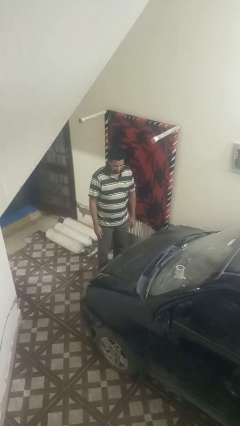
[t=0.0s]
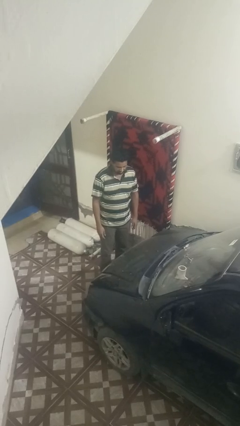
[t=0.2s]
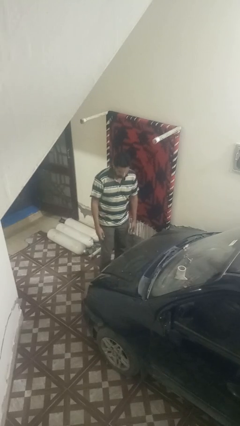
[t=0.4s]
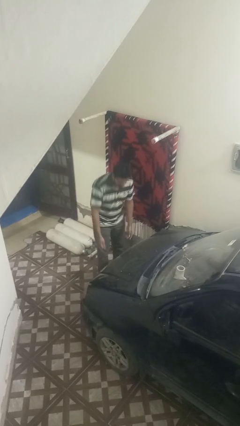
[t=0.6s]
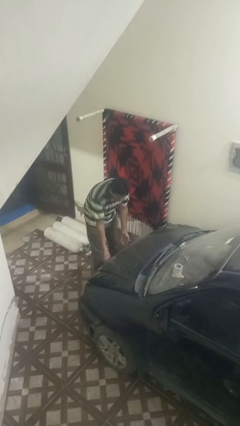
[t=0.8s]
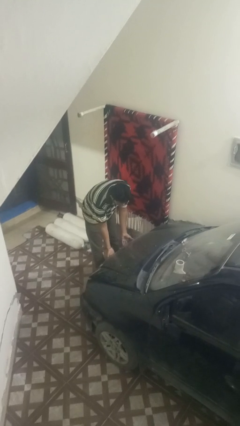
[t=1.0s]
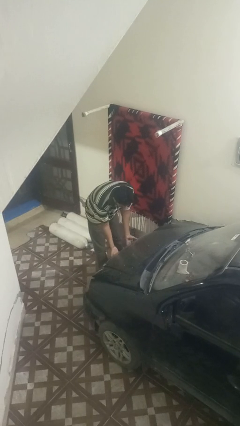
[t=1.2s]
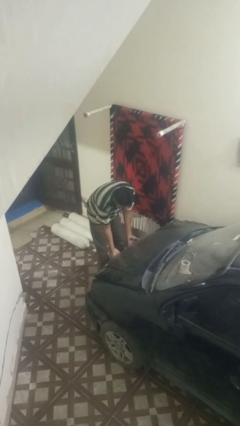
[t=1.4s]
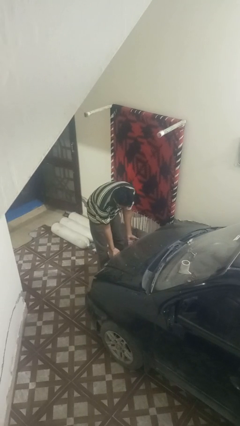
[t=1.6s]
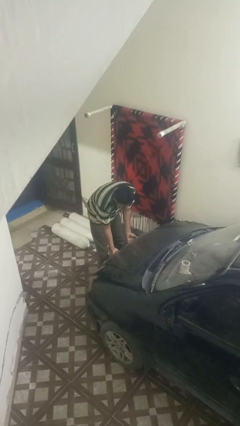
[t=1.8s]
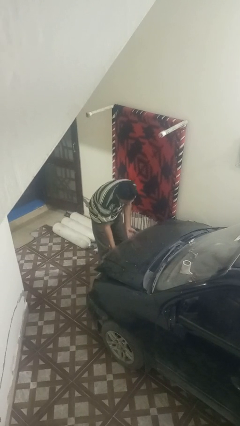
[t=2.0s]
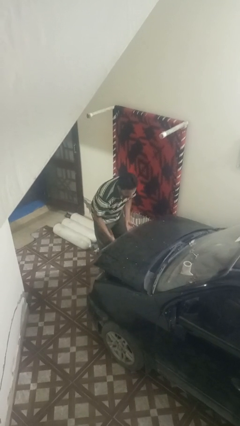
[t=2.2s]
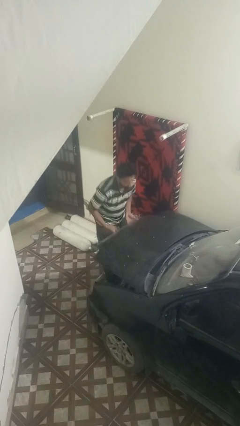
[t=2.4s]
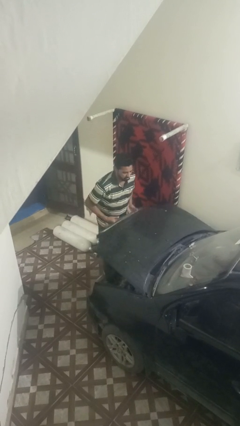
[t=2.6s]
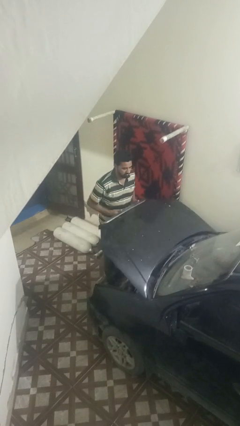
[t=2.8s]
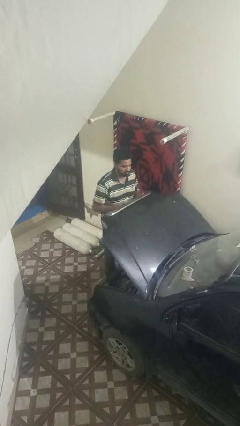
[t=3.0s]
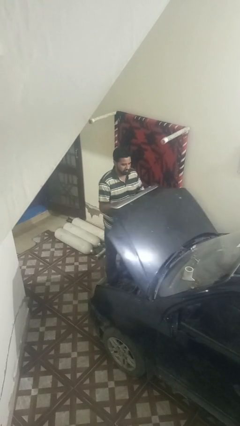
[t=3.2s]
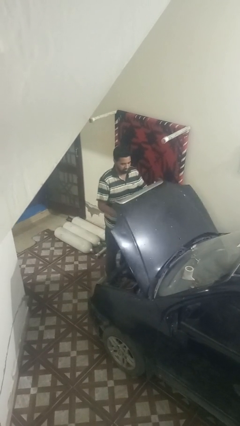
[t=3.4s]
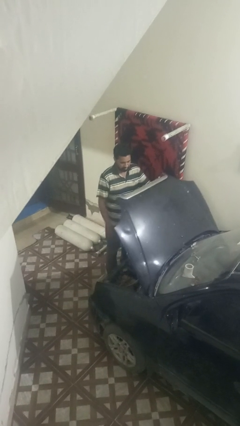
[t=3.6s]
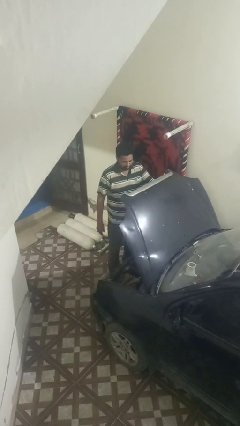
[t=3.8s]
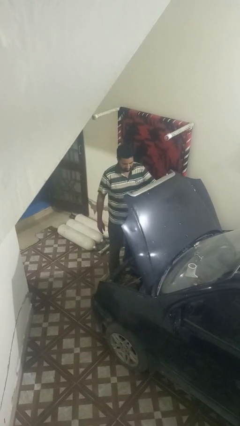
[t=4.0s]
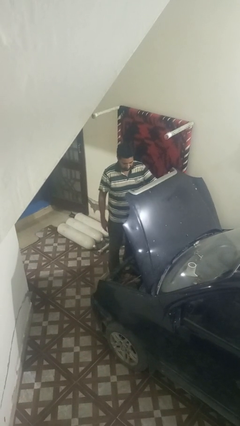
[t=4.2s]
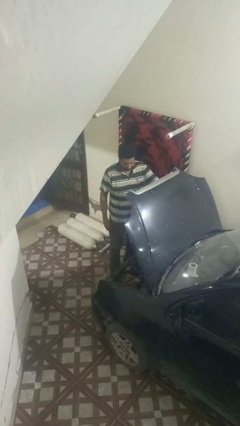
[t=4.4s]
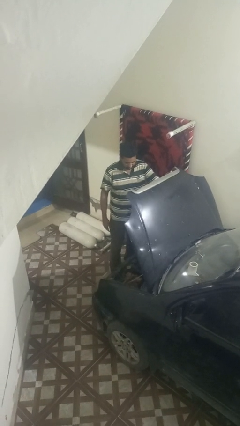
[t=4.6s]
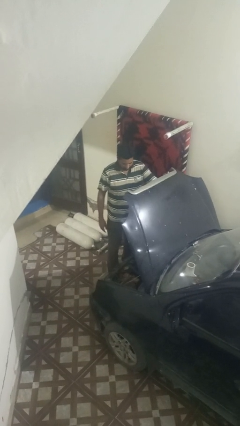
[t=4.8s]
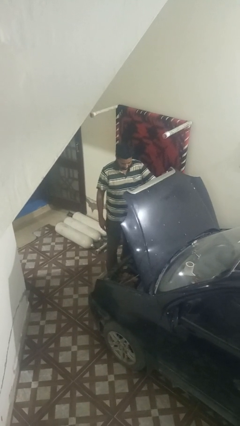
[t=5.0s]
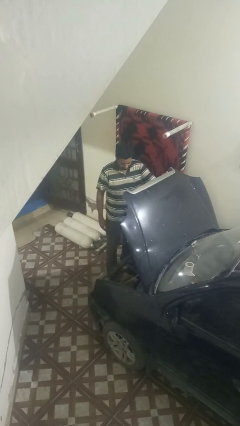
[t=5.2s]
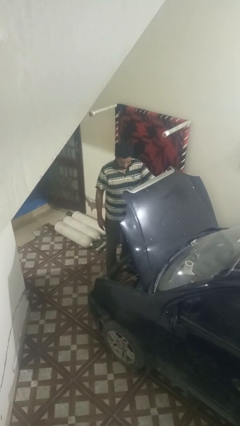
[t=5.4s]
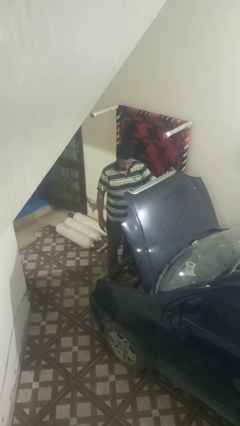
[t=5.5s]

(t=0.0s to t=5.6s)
person opens car hood

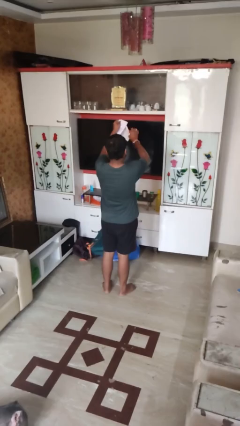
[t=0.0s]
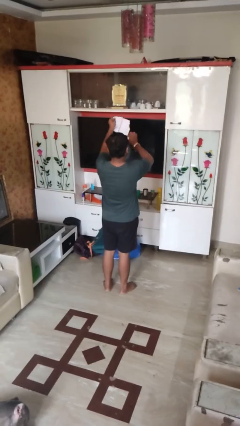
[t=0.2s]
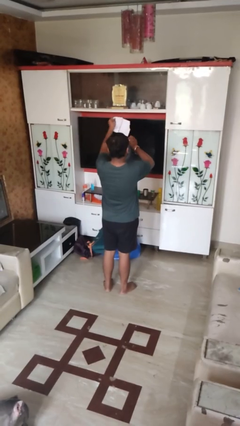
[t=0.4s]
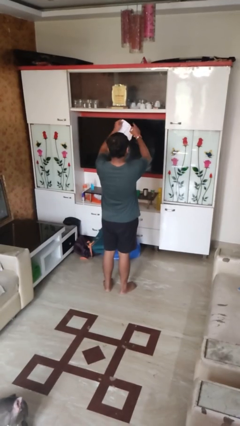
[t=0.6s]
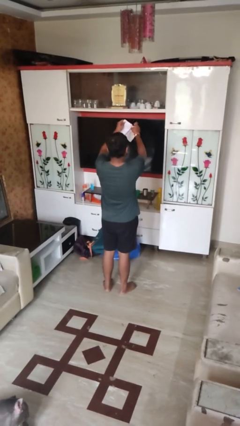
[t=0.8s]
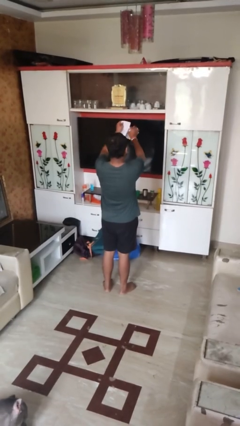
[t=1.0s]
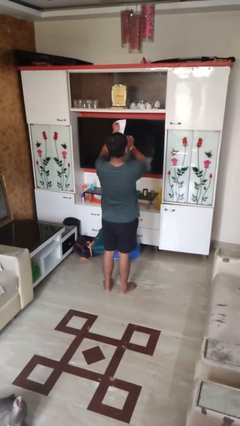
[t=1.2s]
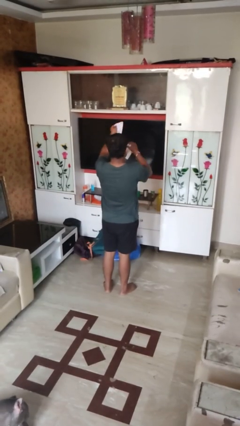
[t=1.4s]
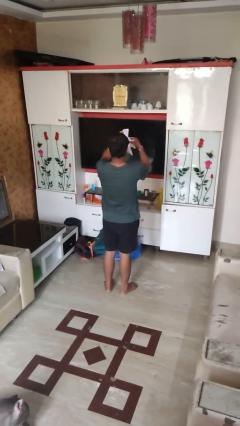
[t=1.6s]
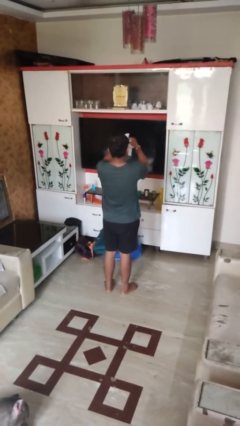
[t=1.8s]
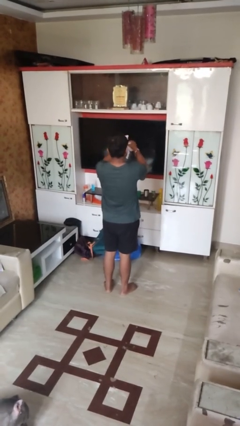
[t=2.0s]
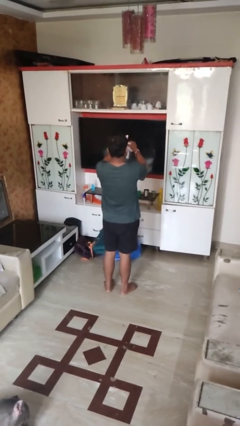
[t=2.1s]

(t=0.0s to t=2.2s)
person tears paper

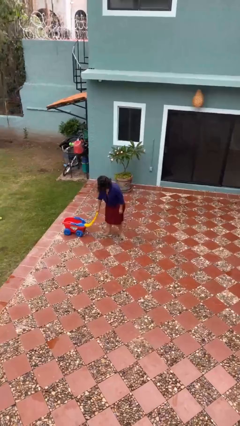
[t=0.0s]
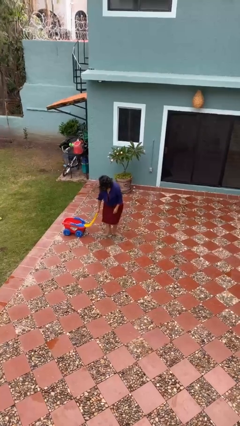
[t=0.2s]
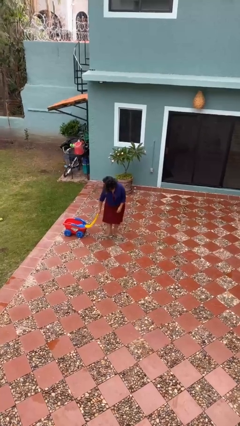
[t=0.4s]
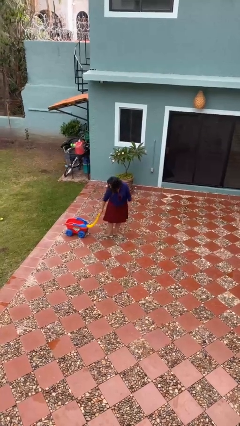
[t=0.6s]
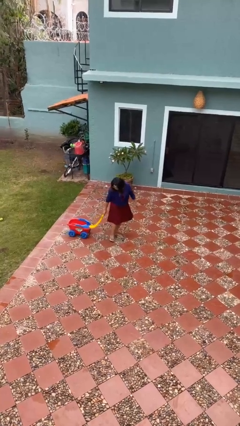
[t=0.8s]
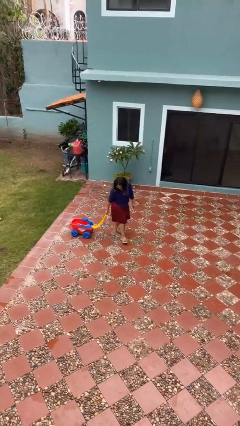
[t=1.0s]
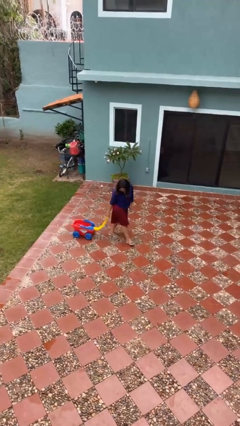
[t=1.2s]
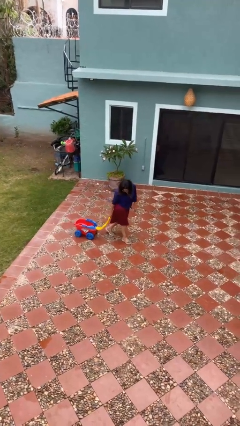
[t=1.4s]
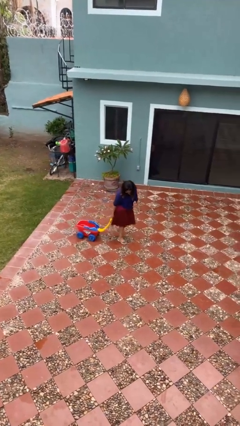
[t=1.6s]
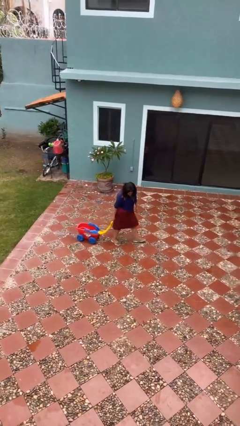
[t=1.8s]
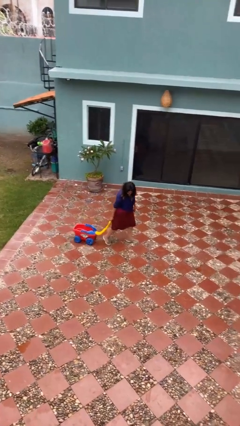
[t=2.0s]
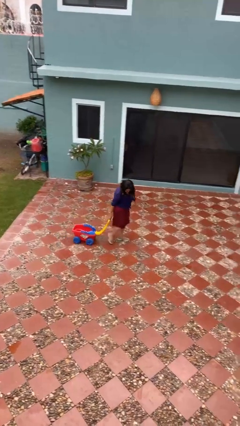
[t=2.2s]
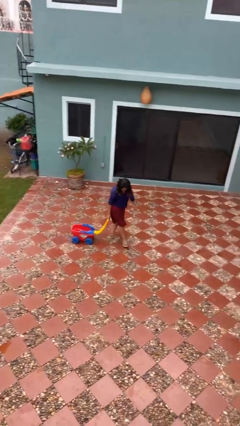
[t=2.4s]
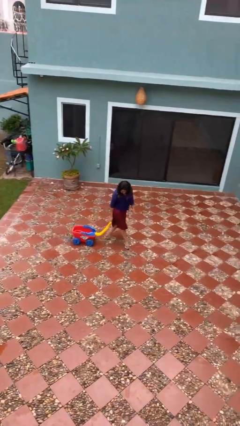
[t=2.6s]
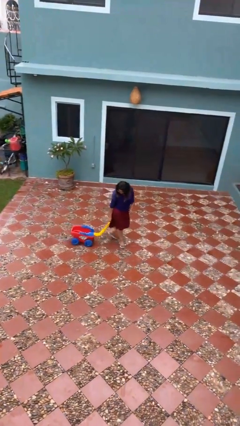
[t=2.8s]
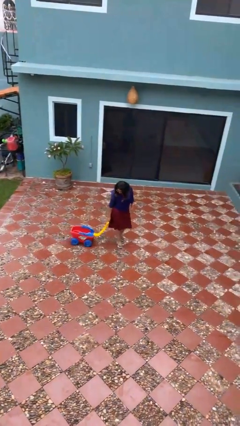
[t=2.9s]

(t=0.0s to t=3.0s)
person pulls wheeled cart

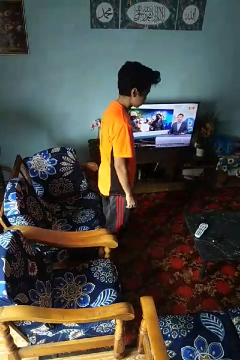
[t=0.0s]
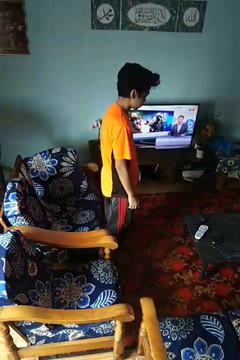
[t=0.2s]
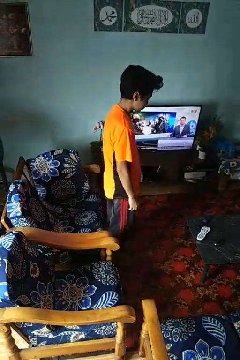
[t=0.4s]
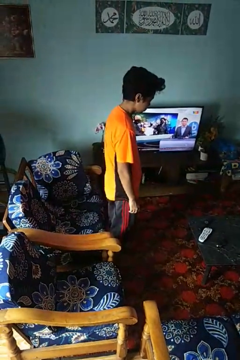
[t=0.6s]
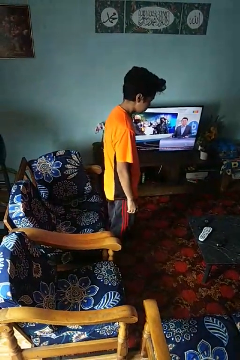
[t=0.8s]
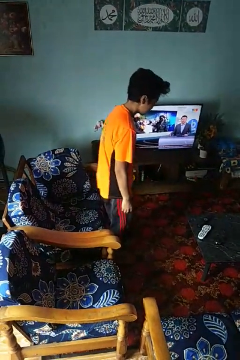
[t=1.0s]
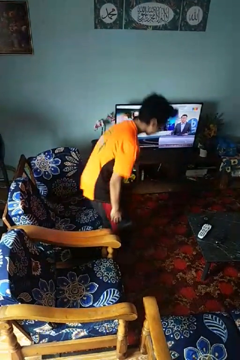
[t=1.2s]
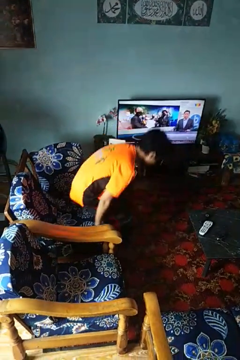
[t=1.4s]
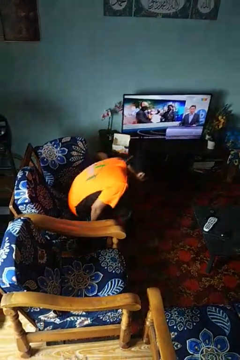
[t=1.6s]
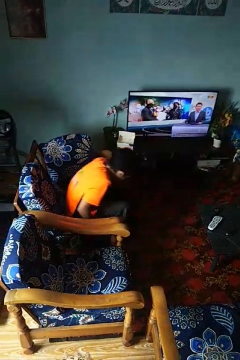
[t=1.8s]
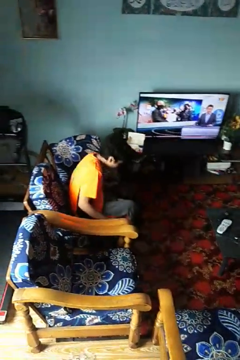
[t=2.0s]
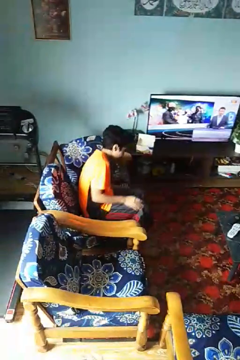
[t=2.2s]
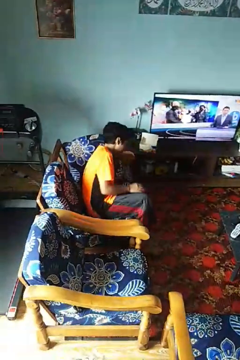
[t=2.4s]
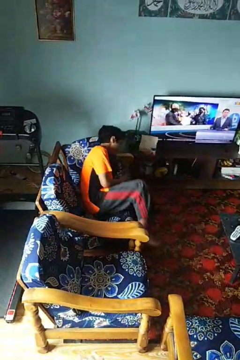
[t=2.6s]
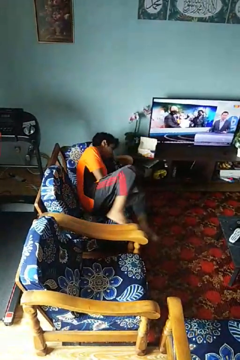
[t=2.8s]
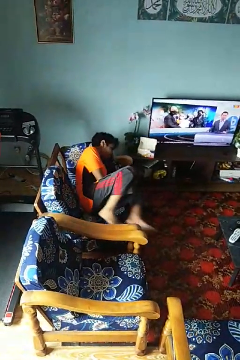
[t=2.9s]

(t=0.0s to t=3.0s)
person lies down on couch

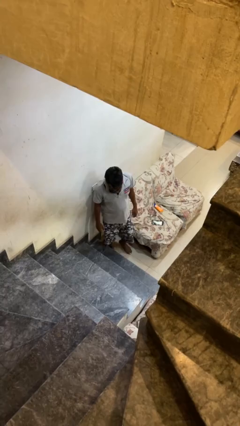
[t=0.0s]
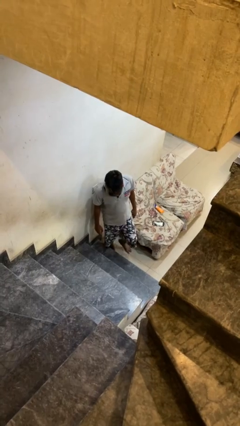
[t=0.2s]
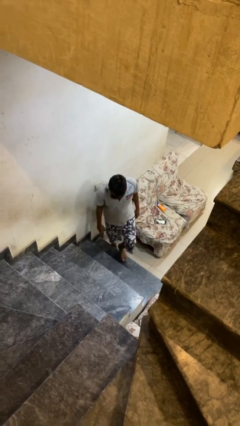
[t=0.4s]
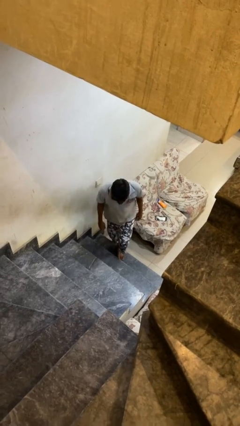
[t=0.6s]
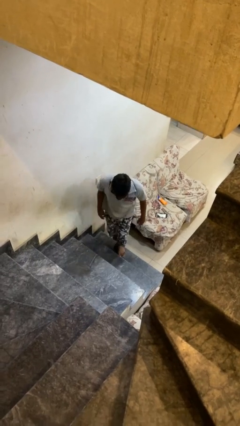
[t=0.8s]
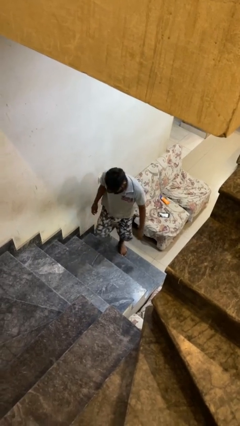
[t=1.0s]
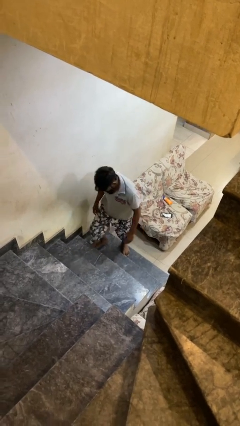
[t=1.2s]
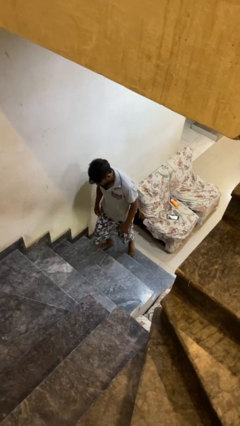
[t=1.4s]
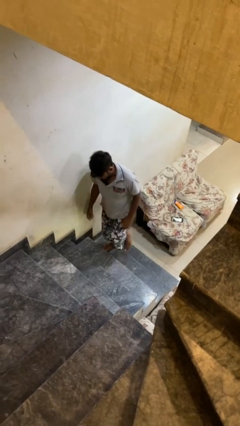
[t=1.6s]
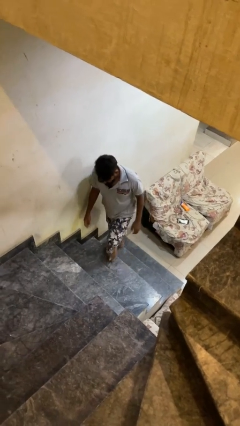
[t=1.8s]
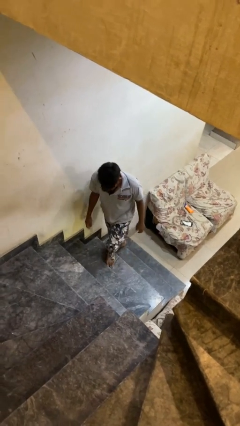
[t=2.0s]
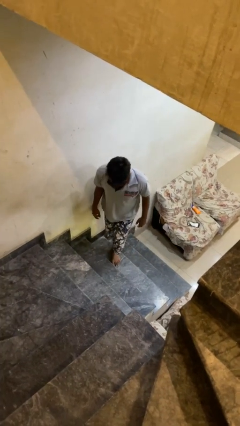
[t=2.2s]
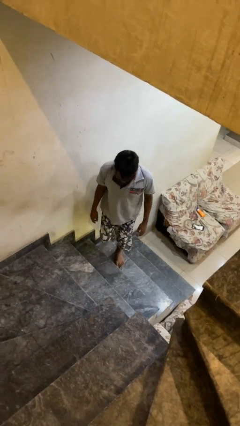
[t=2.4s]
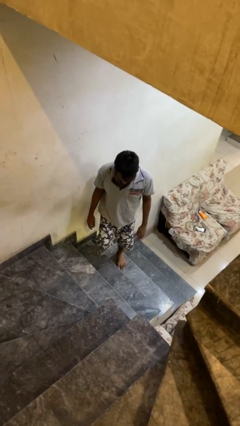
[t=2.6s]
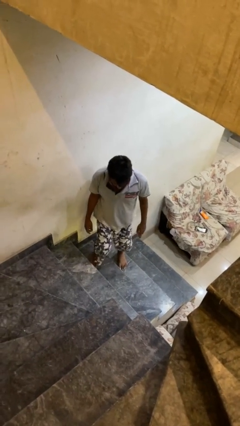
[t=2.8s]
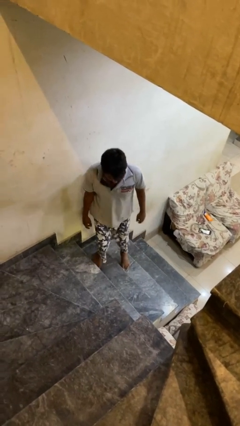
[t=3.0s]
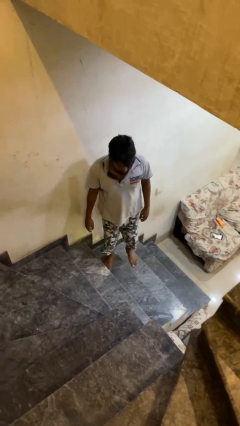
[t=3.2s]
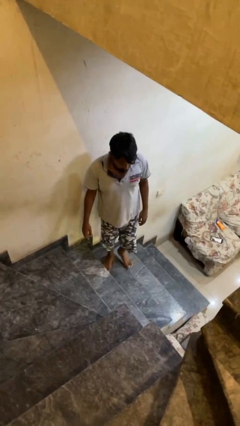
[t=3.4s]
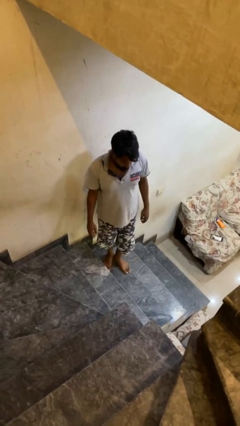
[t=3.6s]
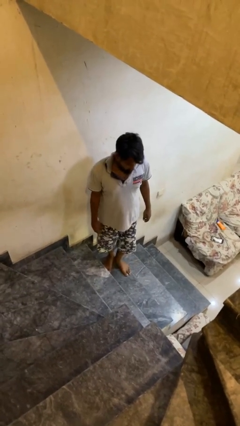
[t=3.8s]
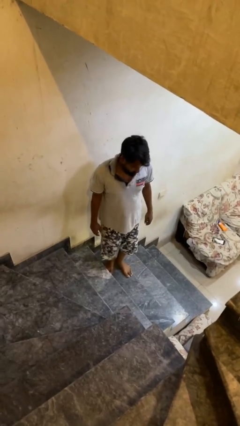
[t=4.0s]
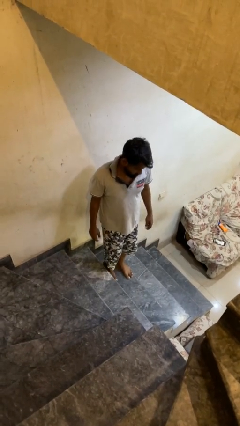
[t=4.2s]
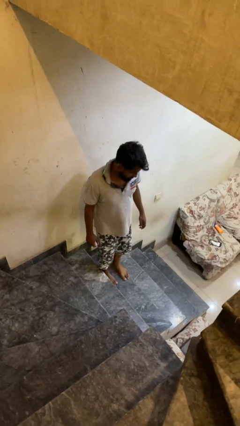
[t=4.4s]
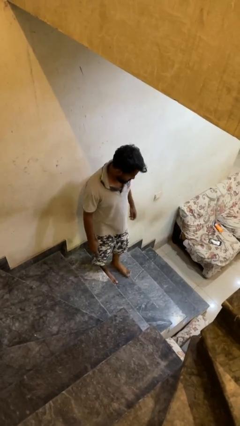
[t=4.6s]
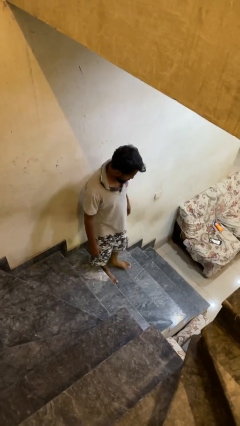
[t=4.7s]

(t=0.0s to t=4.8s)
person climbs up stairs
